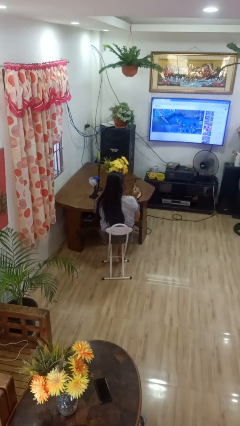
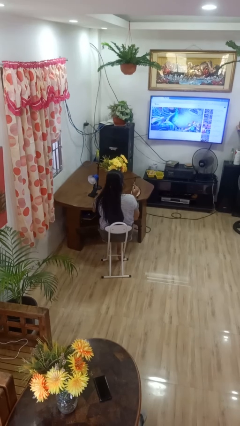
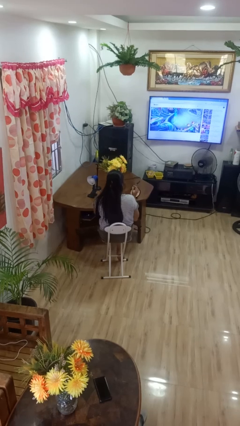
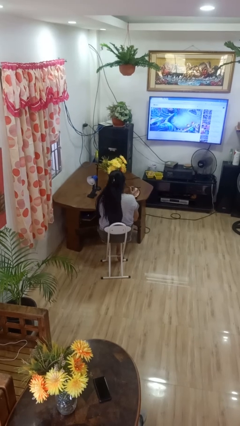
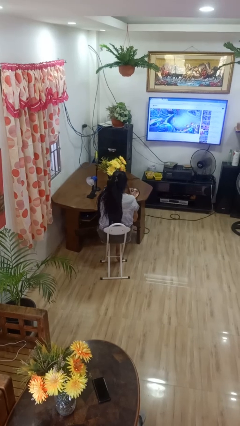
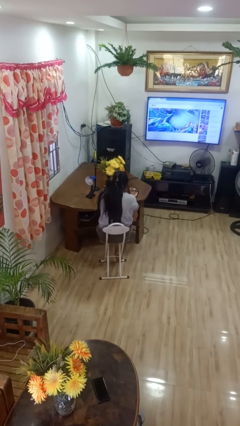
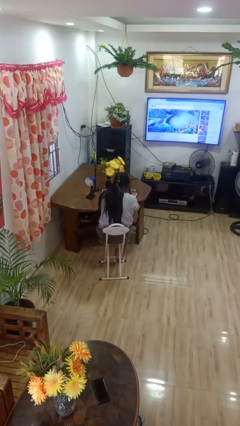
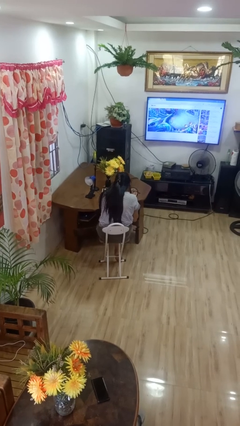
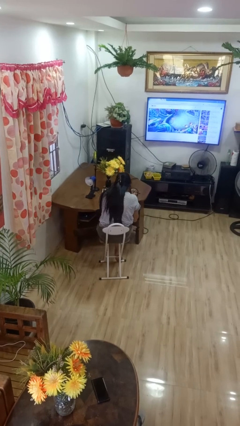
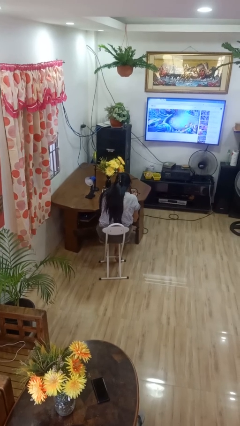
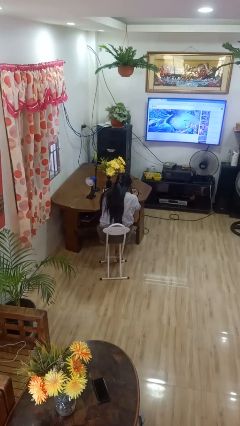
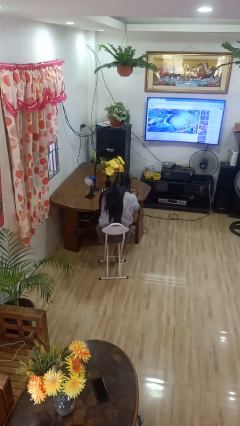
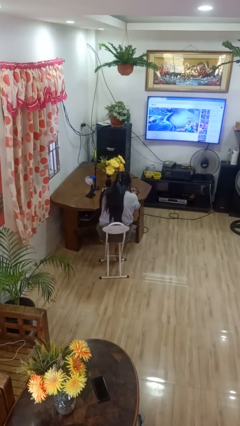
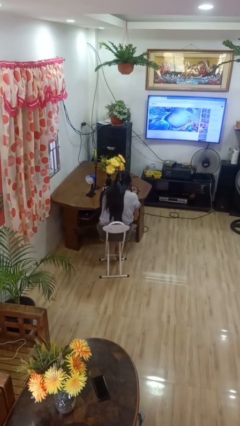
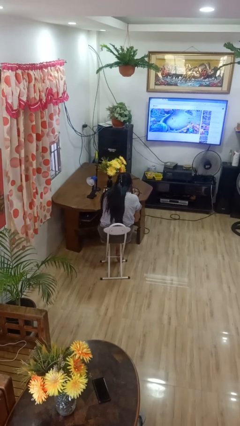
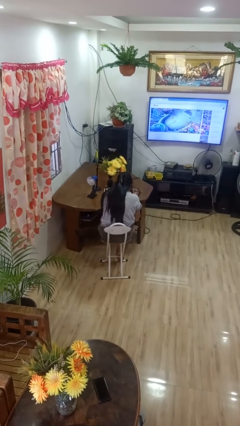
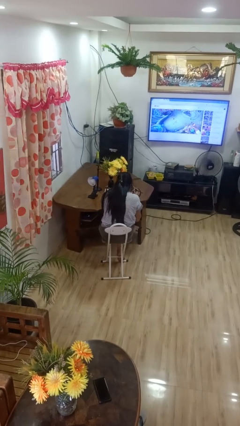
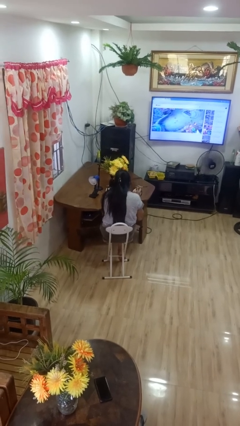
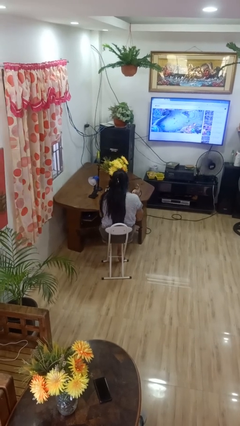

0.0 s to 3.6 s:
person applies eye makeup

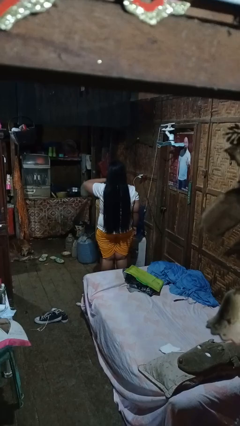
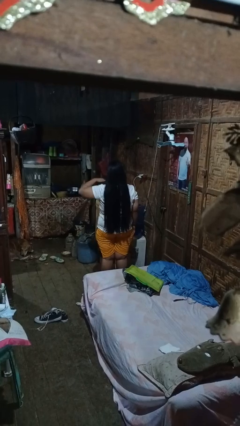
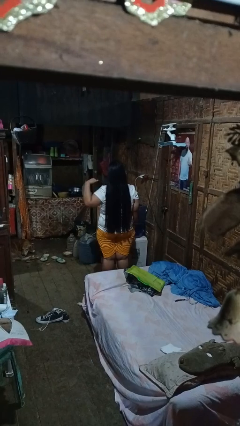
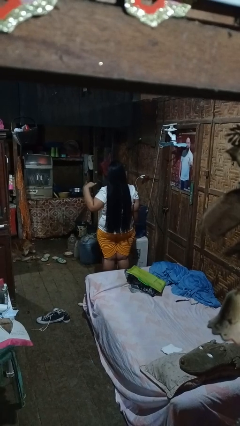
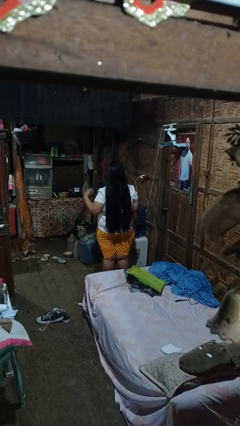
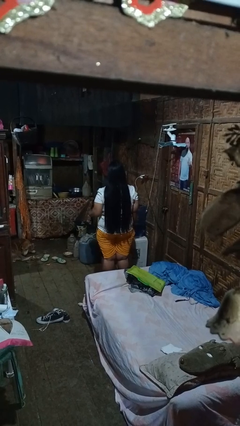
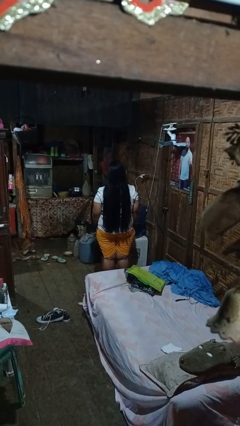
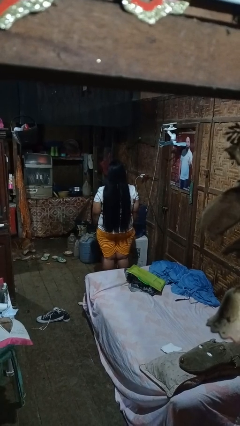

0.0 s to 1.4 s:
person gestures cut

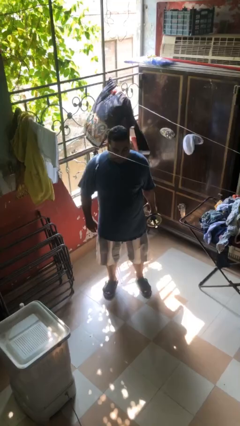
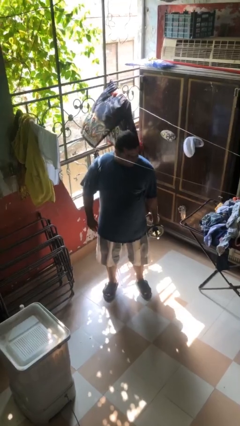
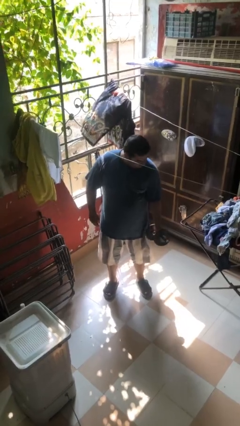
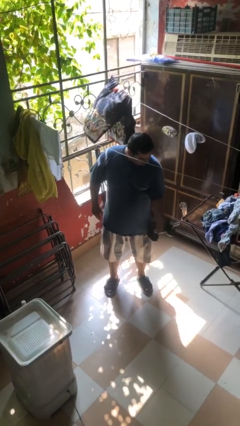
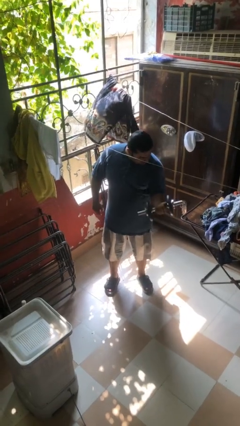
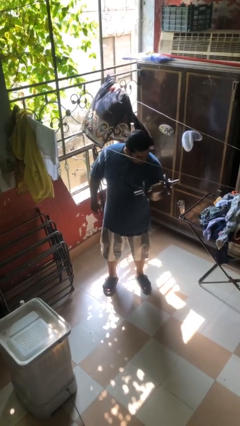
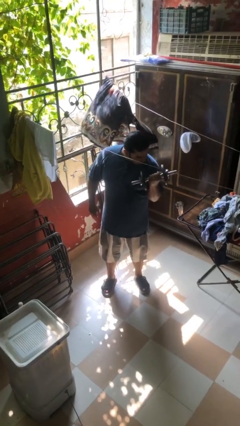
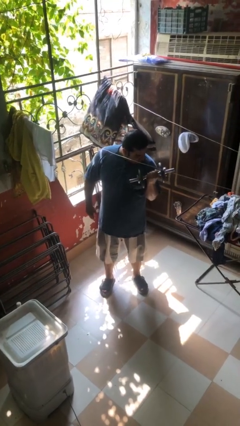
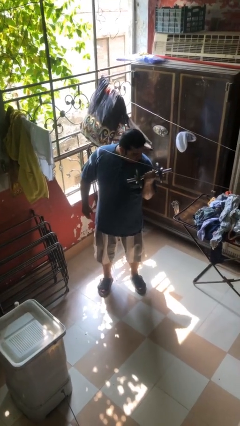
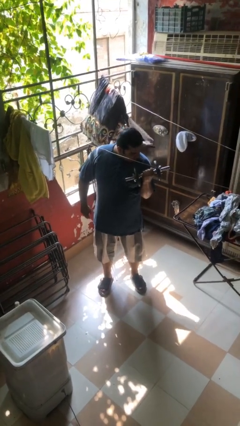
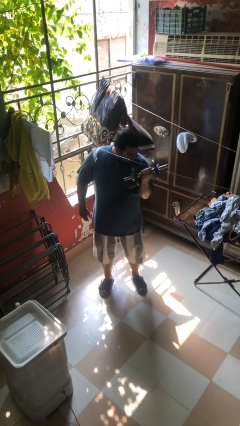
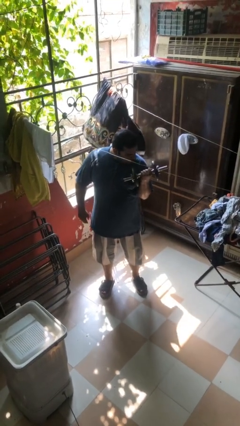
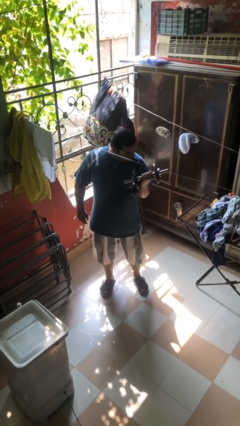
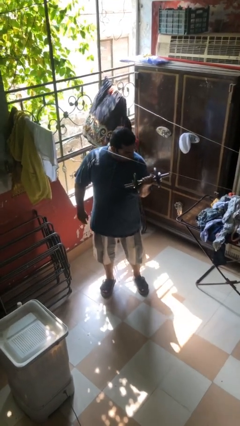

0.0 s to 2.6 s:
person lifts dumbbells

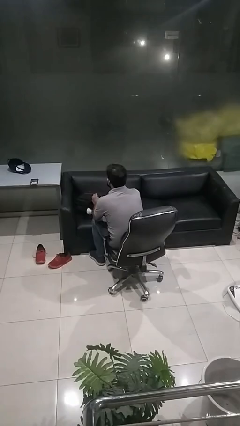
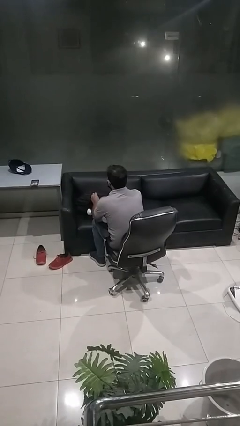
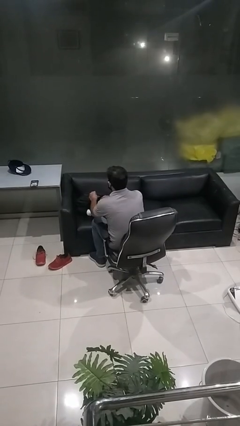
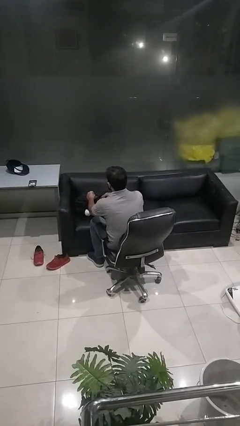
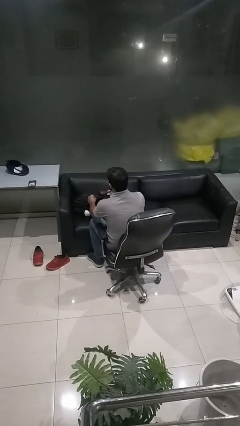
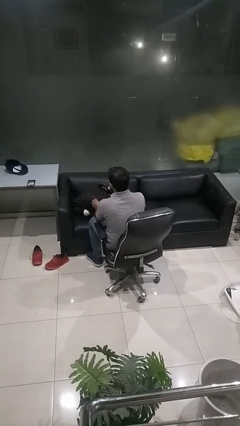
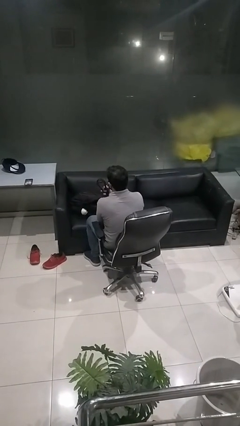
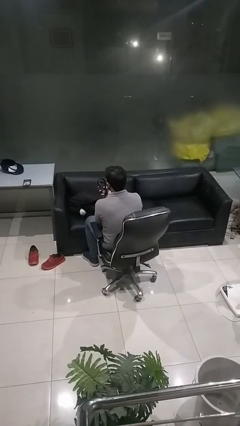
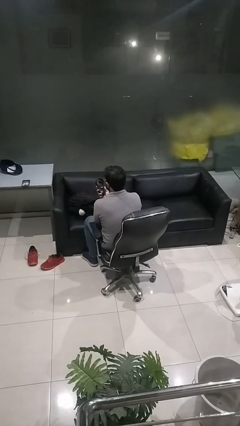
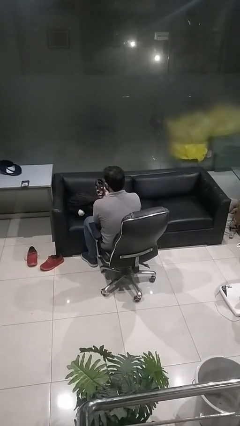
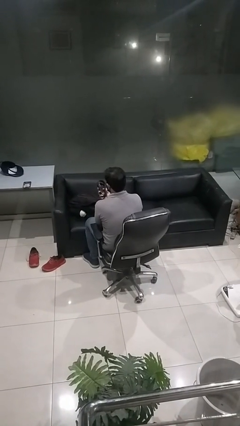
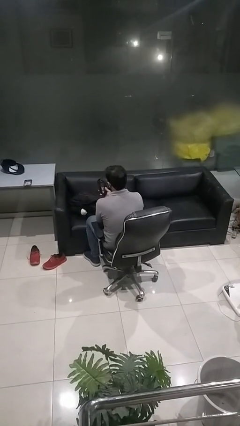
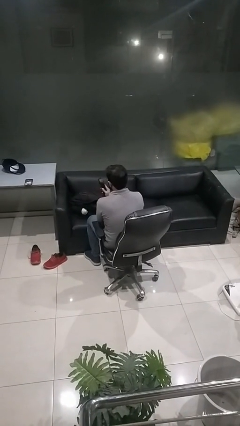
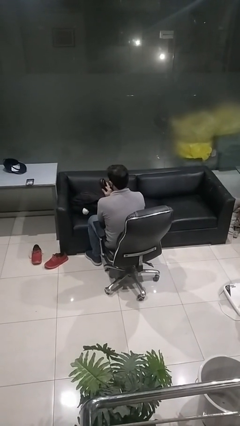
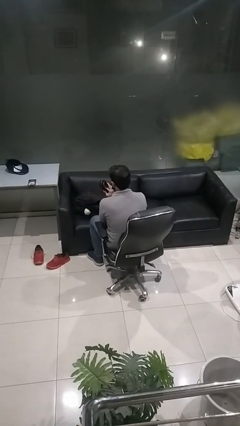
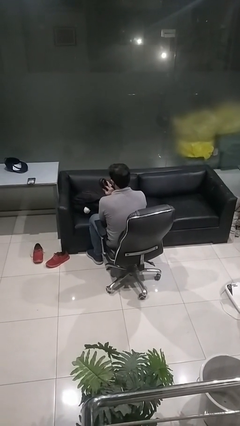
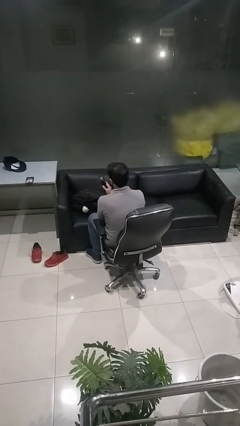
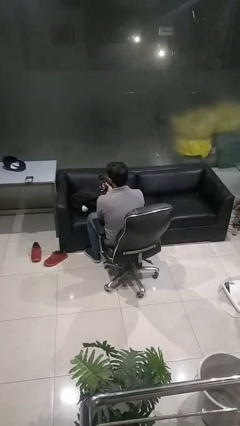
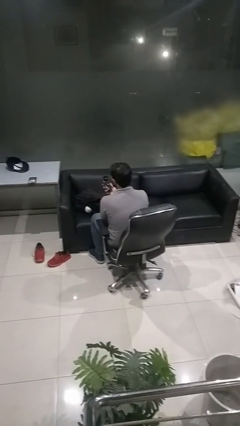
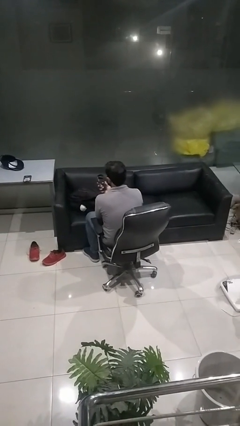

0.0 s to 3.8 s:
person takes object from backpack

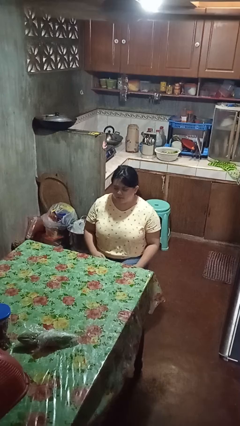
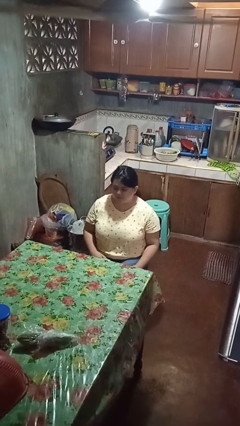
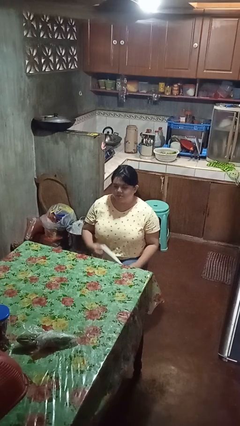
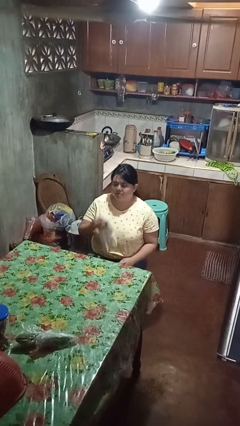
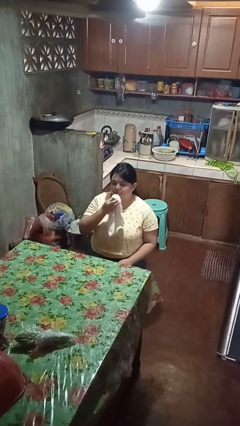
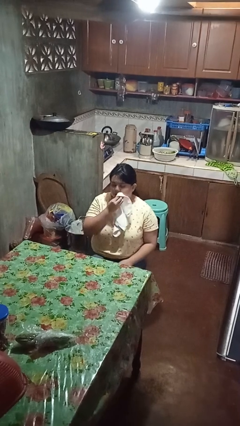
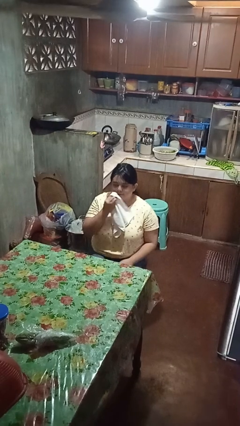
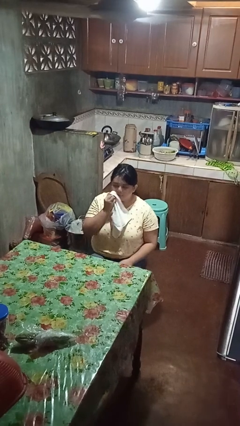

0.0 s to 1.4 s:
person wipes mouth with napkin

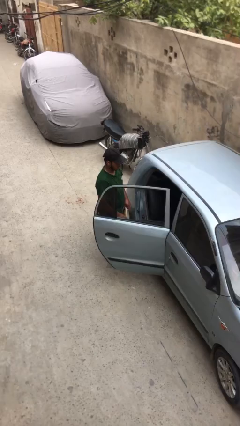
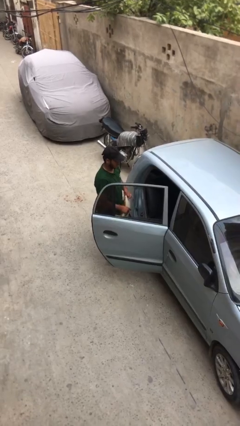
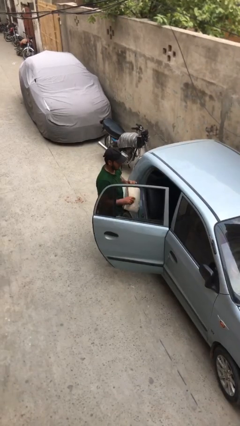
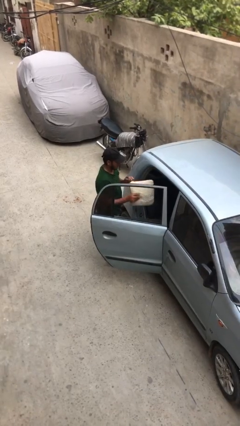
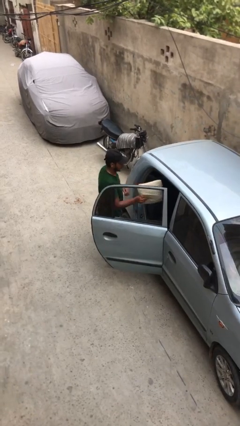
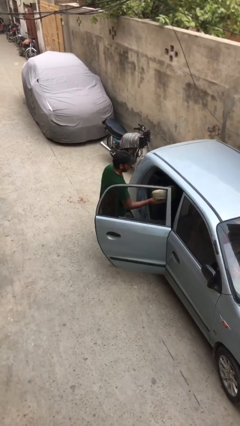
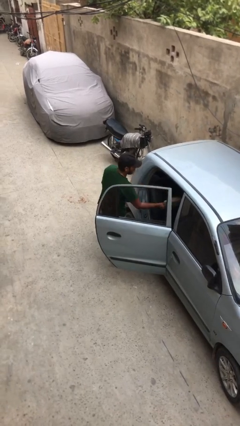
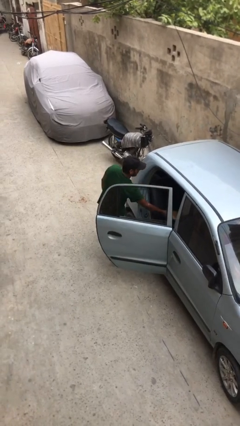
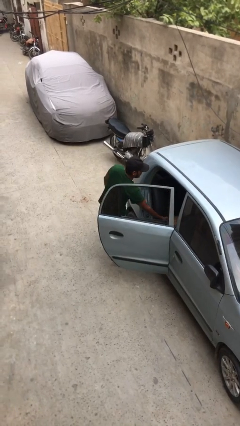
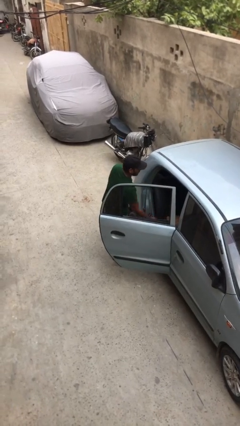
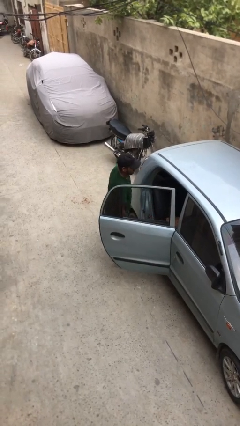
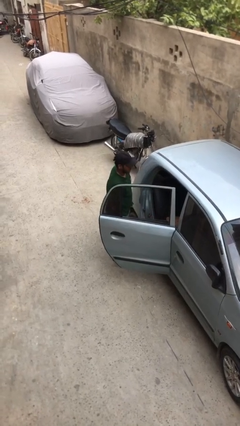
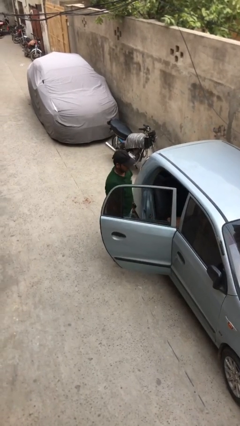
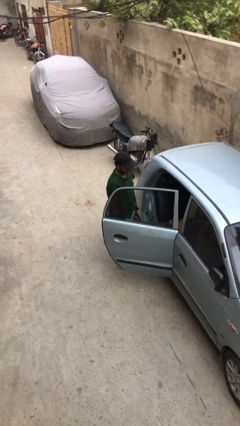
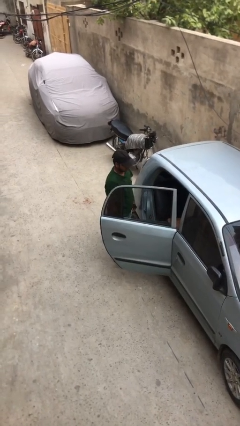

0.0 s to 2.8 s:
person loads car

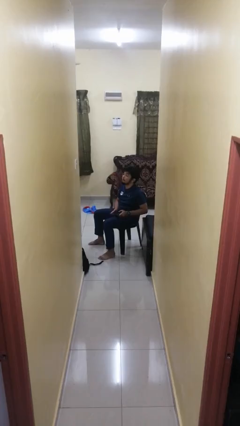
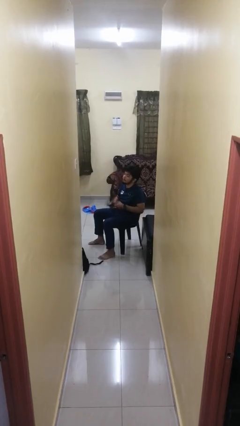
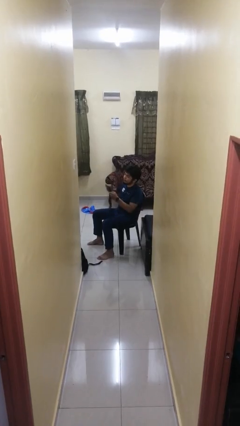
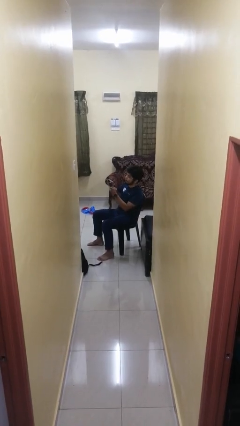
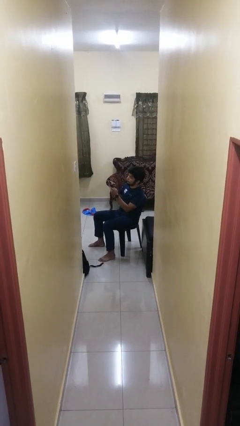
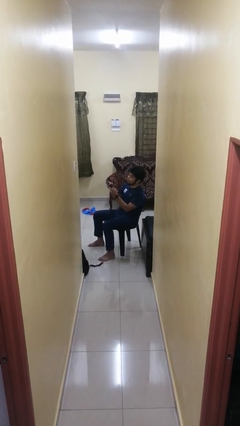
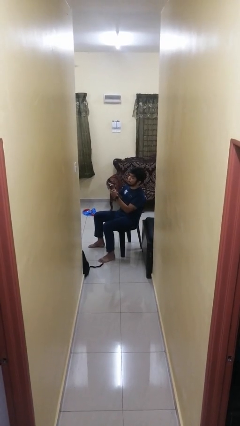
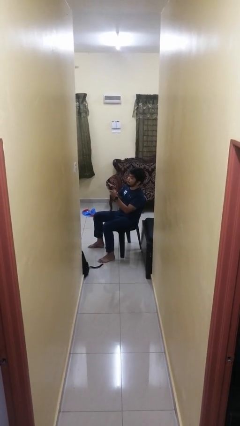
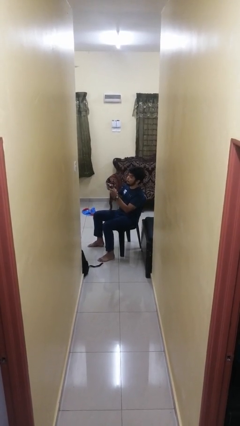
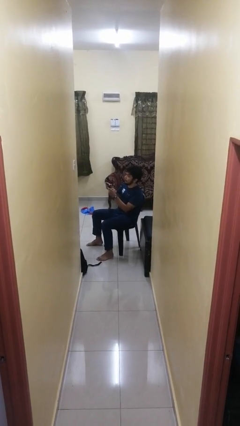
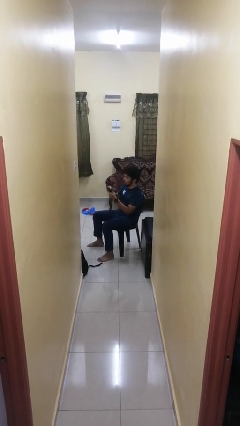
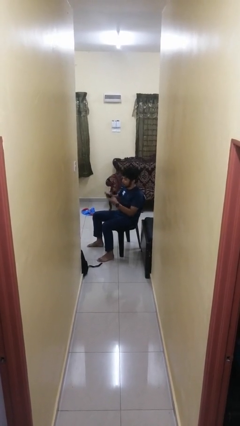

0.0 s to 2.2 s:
person interacts with handheld game
